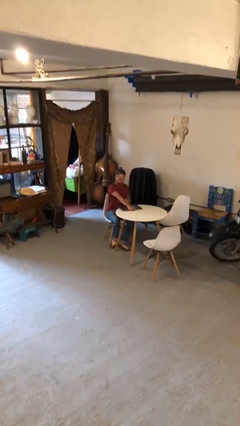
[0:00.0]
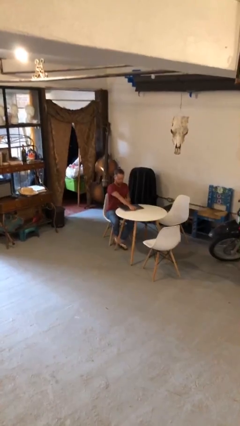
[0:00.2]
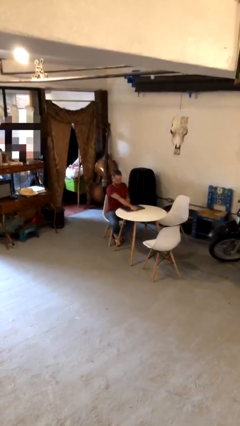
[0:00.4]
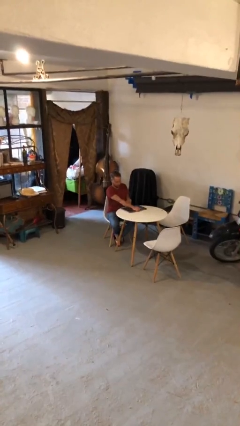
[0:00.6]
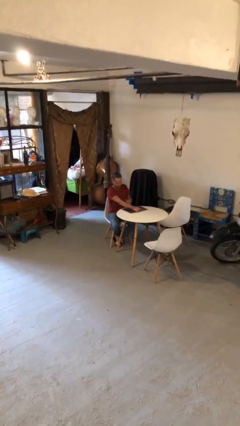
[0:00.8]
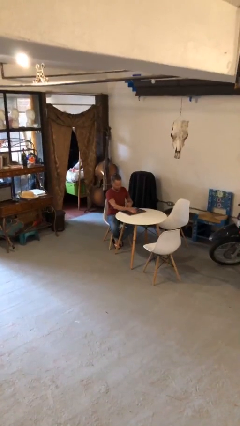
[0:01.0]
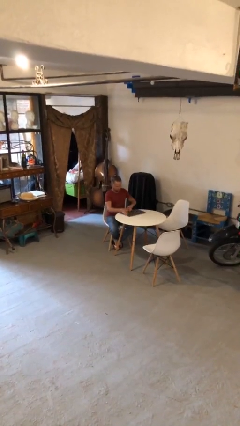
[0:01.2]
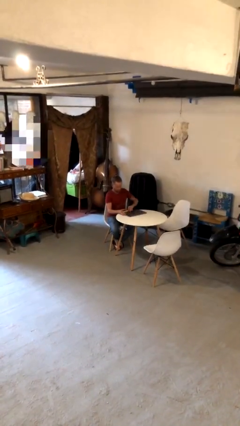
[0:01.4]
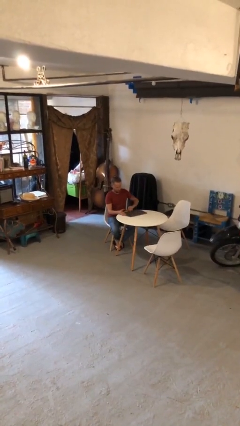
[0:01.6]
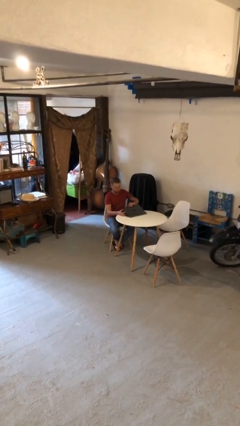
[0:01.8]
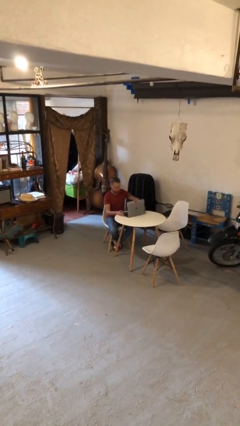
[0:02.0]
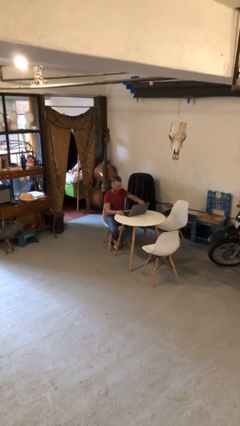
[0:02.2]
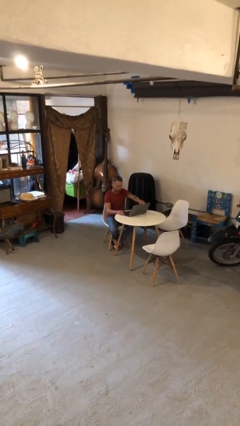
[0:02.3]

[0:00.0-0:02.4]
person interacts with laptop

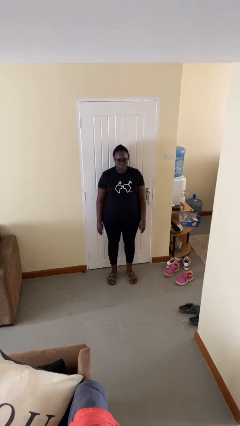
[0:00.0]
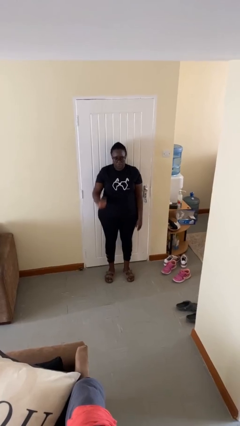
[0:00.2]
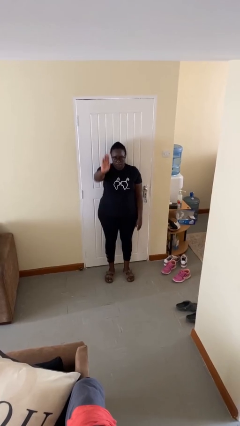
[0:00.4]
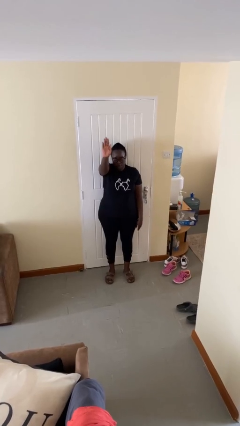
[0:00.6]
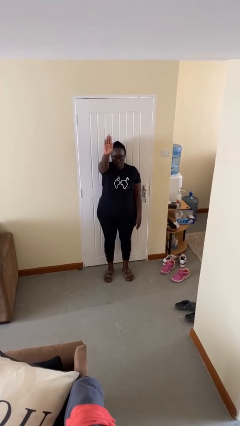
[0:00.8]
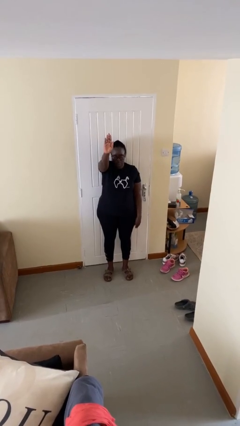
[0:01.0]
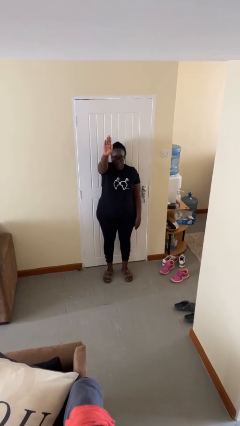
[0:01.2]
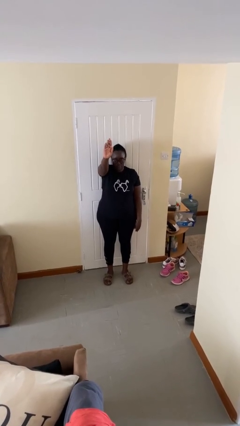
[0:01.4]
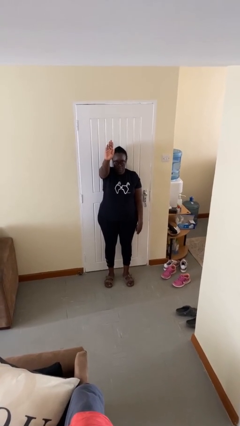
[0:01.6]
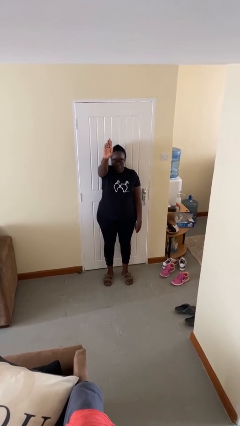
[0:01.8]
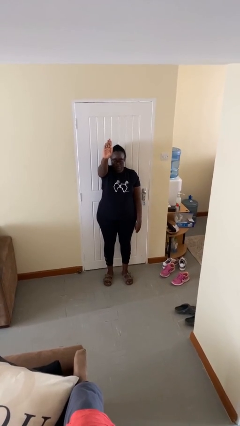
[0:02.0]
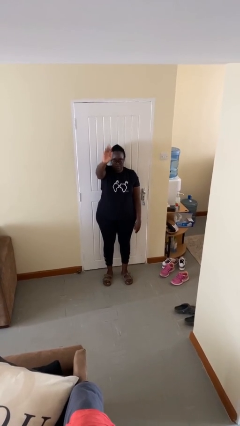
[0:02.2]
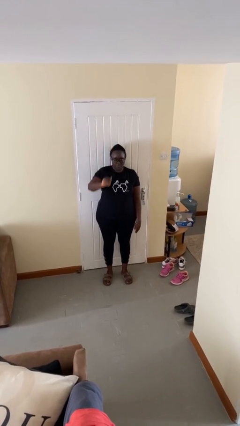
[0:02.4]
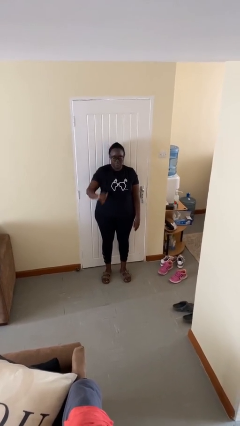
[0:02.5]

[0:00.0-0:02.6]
person gestures stop

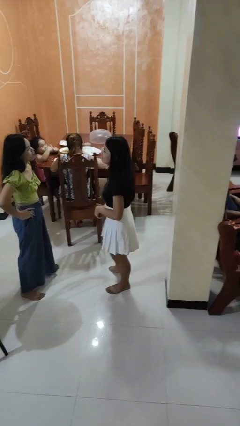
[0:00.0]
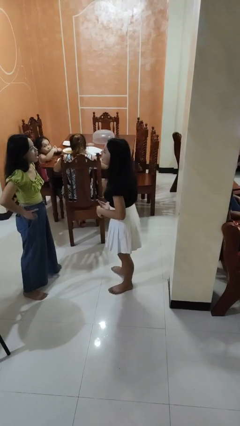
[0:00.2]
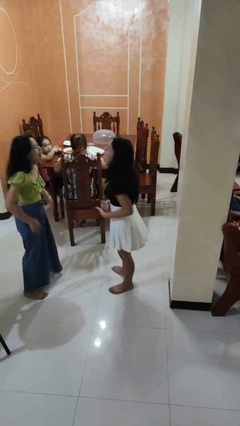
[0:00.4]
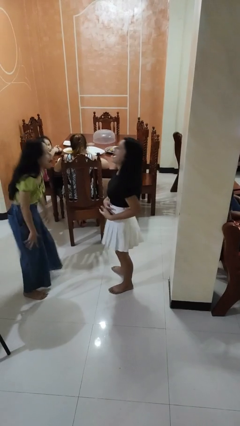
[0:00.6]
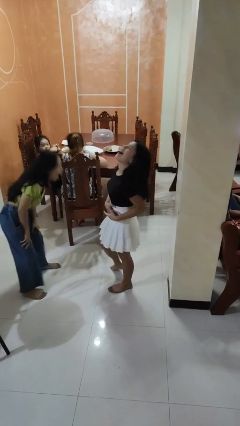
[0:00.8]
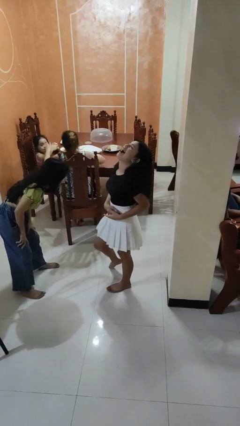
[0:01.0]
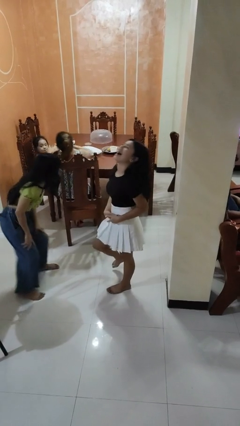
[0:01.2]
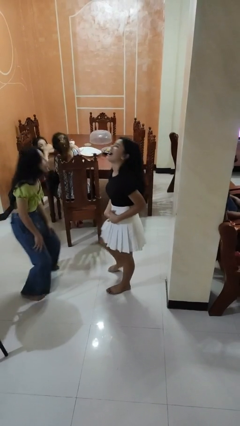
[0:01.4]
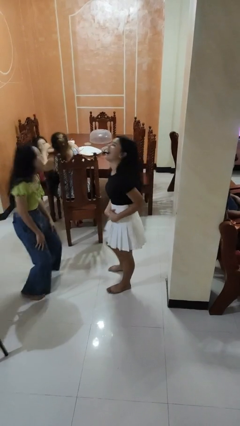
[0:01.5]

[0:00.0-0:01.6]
person laughs with person

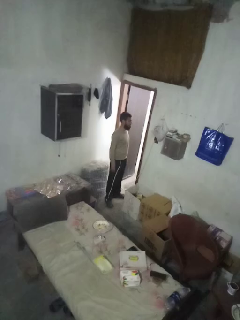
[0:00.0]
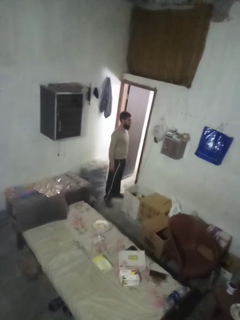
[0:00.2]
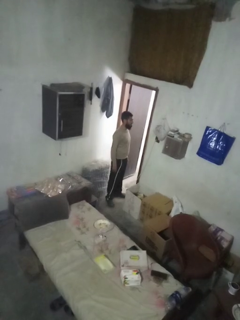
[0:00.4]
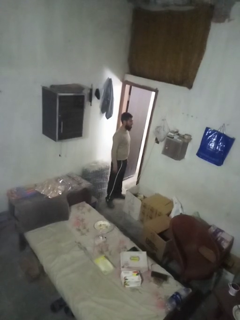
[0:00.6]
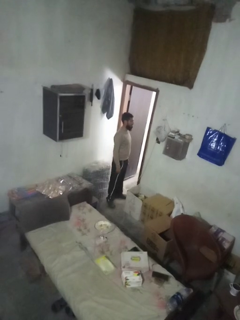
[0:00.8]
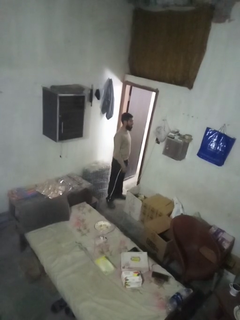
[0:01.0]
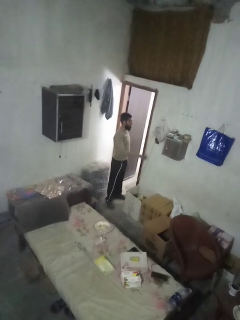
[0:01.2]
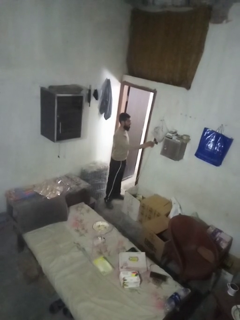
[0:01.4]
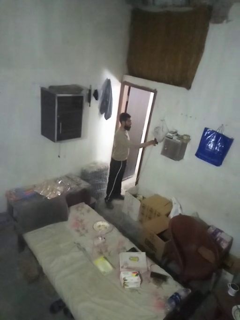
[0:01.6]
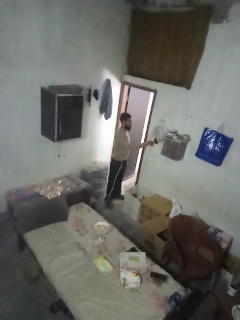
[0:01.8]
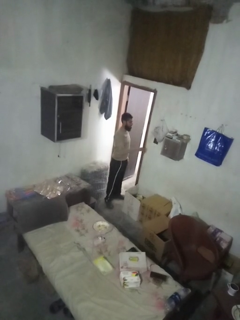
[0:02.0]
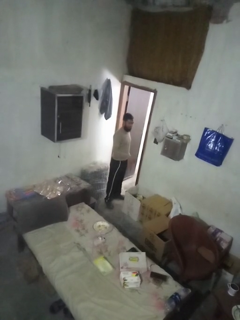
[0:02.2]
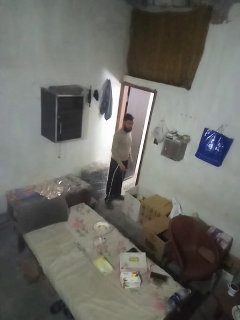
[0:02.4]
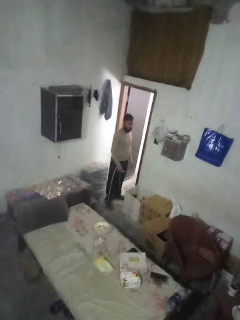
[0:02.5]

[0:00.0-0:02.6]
person unplugs from electrical socket

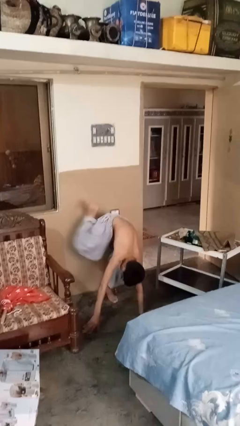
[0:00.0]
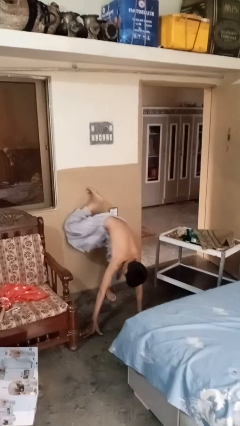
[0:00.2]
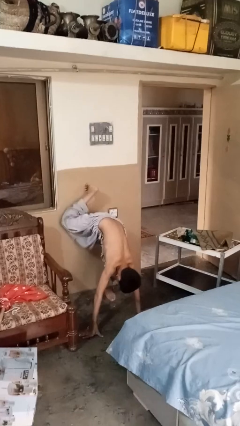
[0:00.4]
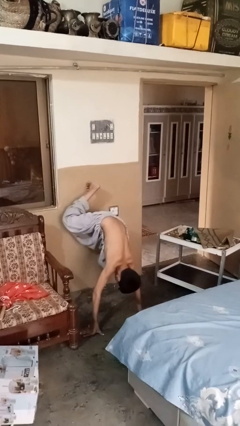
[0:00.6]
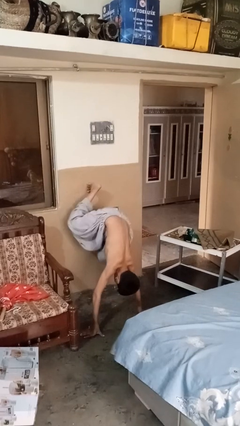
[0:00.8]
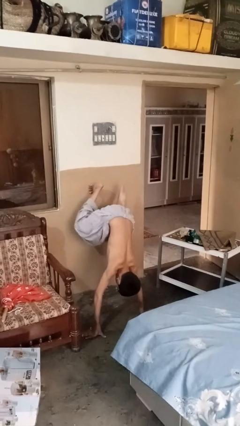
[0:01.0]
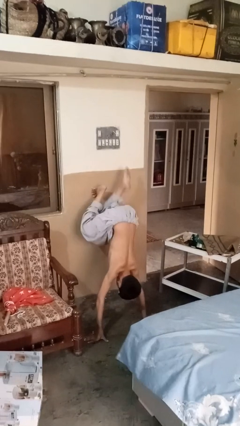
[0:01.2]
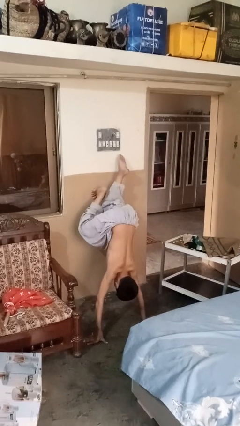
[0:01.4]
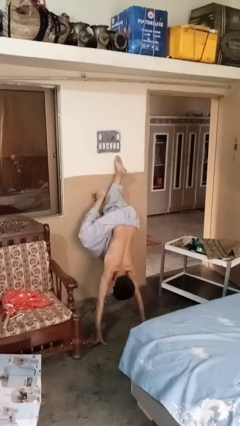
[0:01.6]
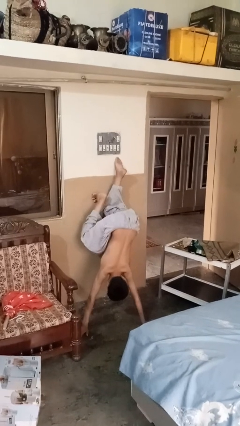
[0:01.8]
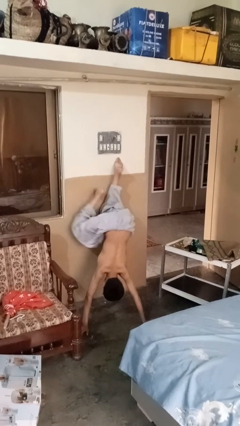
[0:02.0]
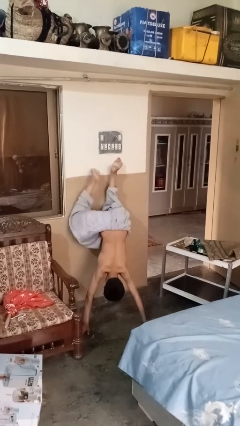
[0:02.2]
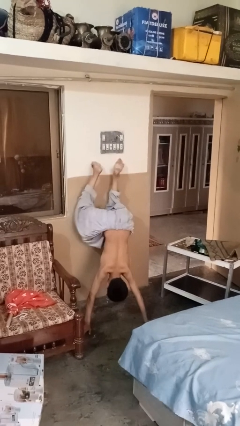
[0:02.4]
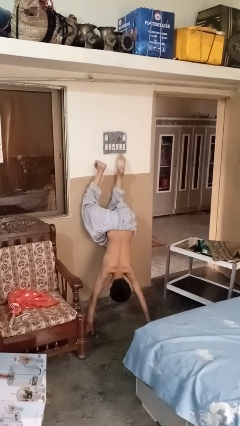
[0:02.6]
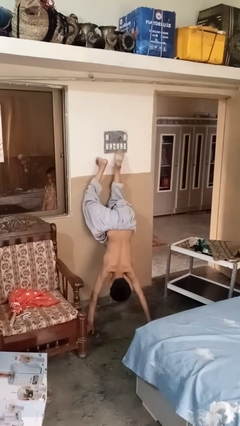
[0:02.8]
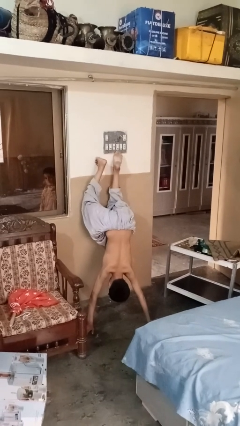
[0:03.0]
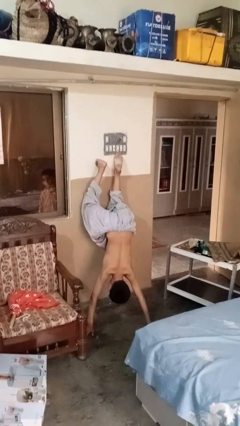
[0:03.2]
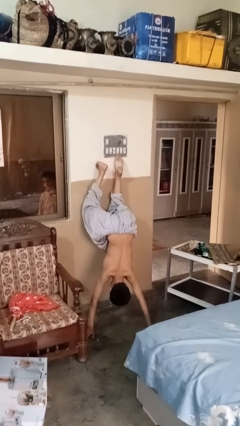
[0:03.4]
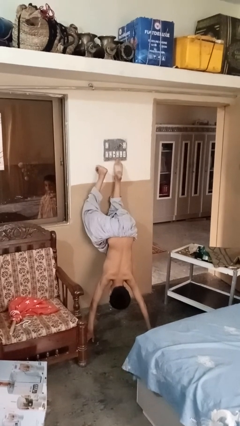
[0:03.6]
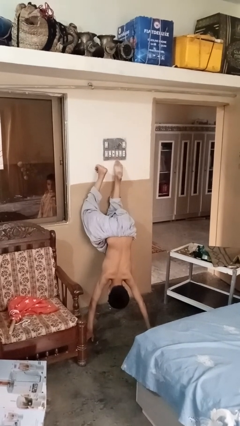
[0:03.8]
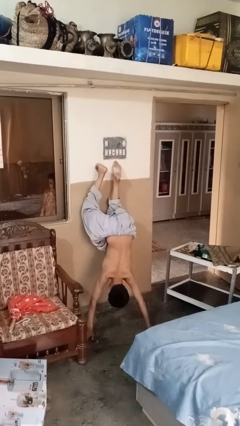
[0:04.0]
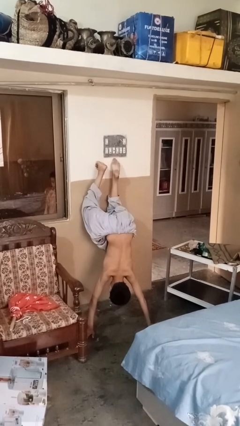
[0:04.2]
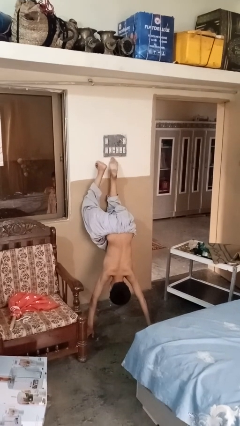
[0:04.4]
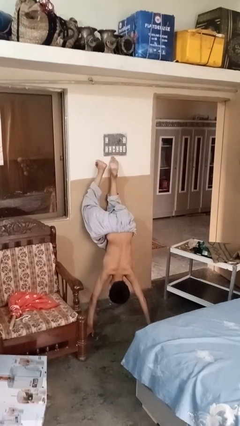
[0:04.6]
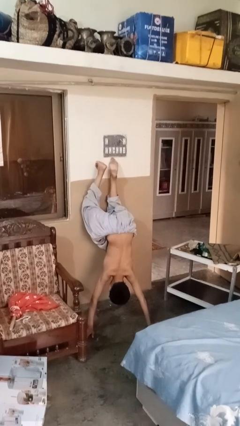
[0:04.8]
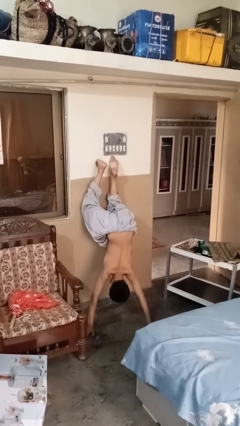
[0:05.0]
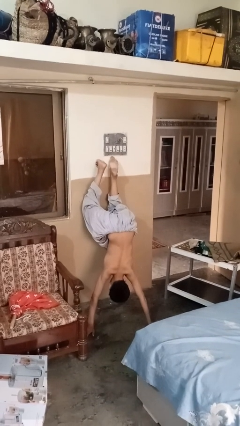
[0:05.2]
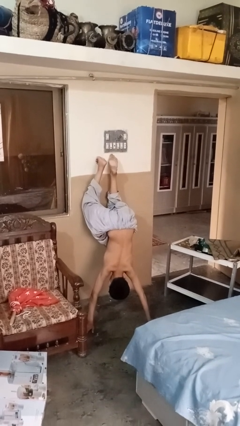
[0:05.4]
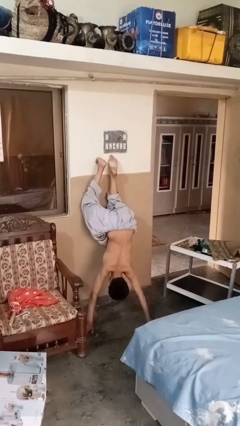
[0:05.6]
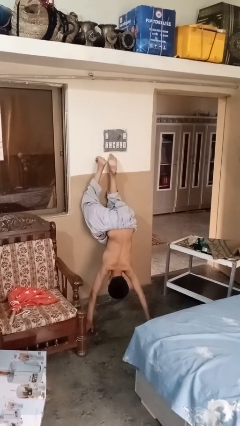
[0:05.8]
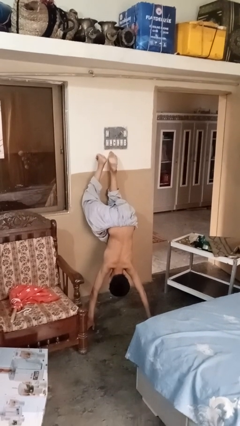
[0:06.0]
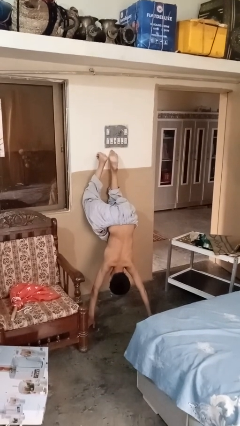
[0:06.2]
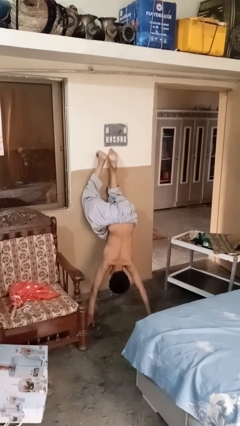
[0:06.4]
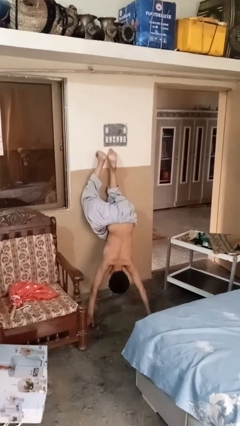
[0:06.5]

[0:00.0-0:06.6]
person somersaults

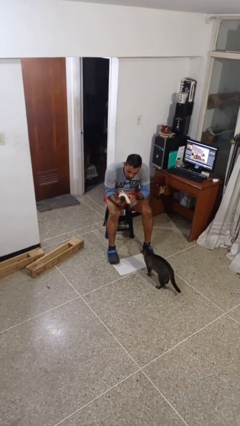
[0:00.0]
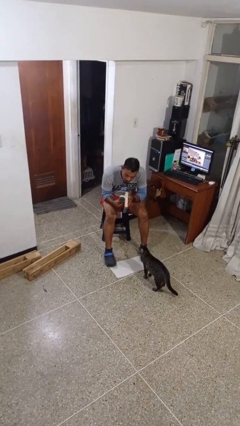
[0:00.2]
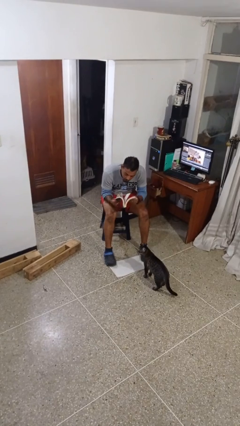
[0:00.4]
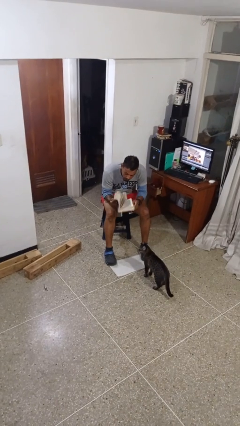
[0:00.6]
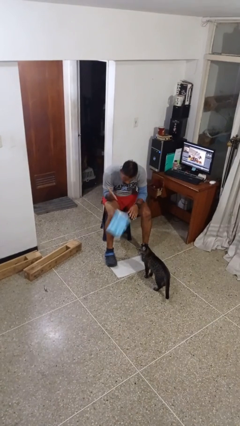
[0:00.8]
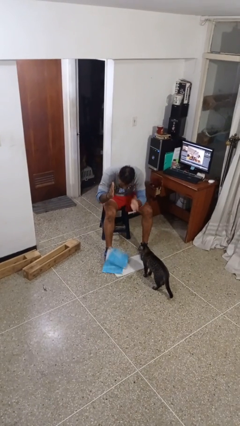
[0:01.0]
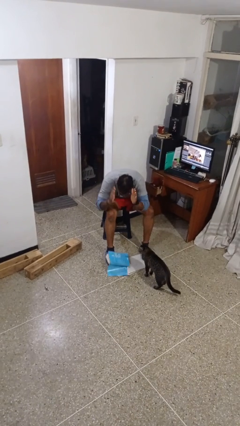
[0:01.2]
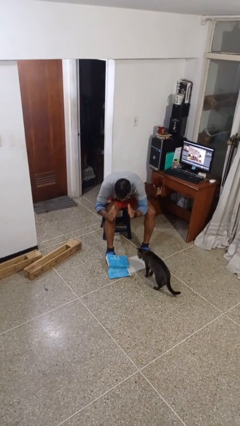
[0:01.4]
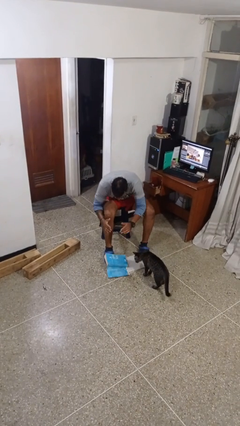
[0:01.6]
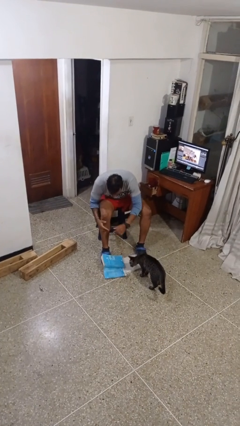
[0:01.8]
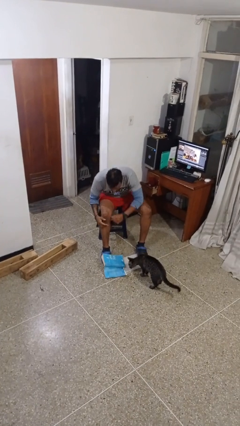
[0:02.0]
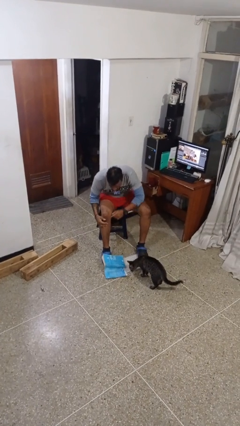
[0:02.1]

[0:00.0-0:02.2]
person drops object
